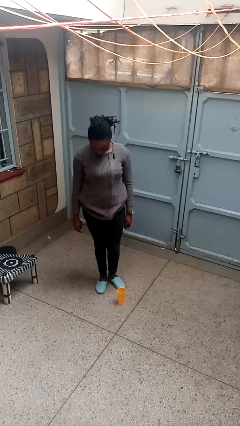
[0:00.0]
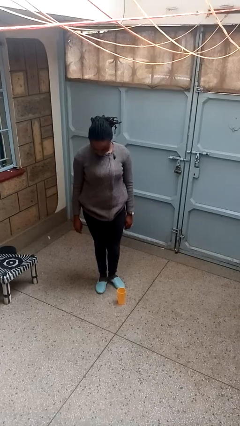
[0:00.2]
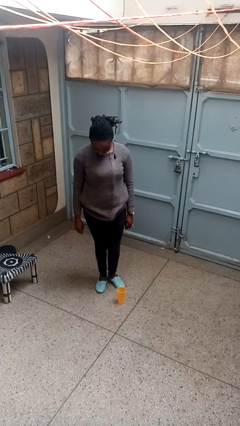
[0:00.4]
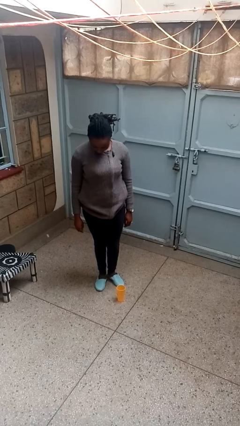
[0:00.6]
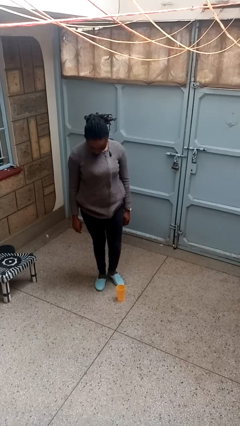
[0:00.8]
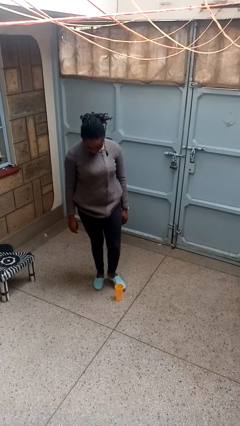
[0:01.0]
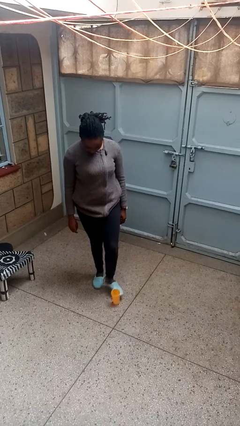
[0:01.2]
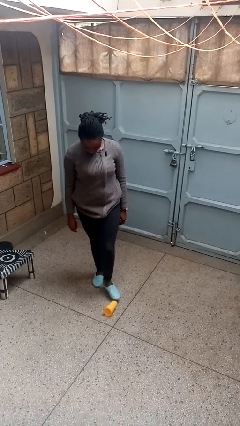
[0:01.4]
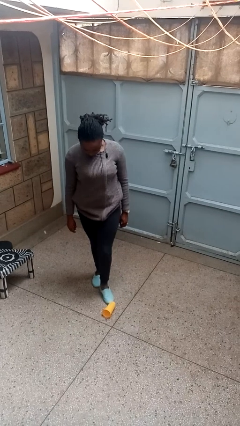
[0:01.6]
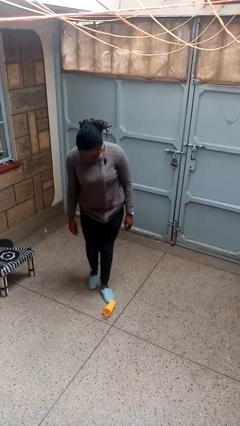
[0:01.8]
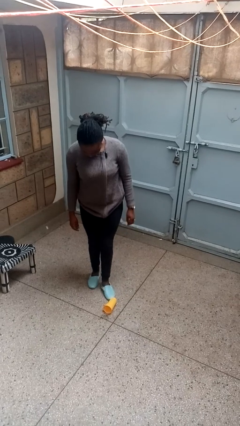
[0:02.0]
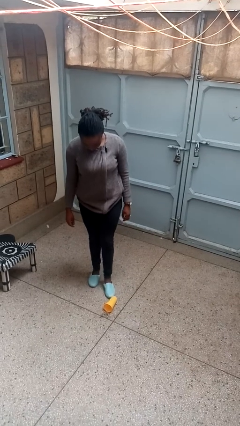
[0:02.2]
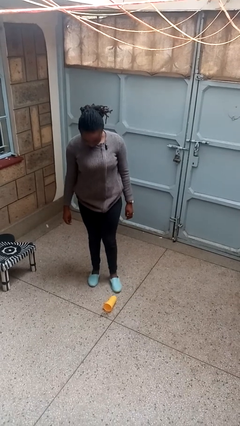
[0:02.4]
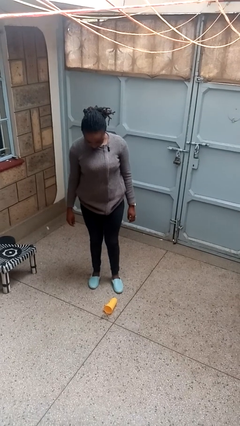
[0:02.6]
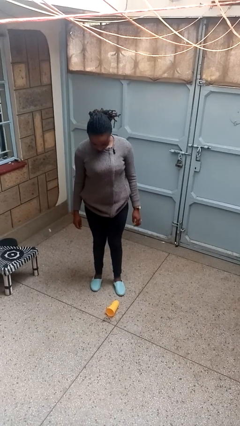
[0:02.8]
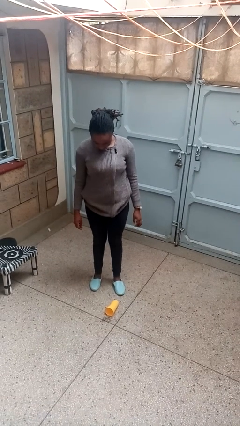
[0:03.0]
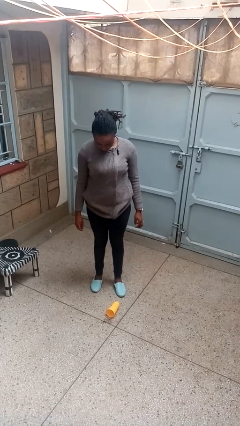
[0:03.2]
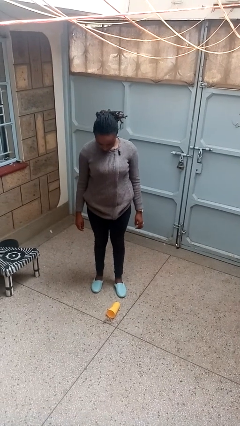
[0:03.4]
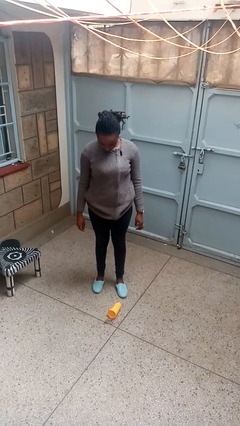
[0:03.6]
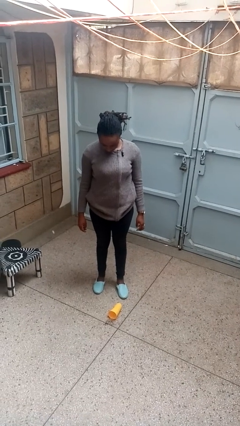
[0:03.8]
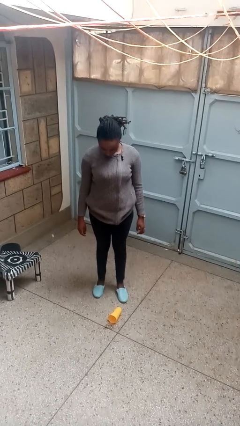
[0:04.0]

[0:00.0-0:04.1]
person spills on floor

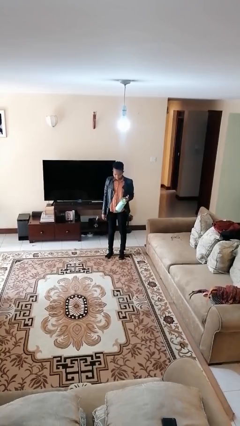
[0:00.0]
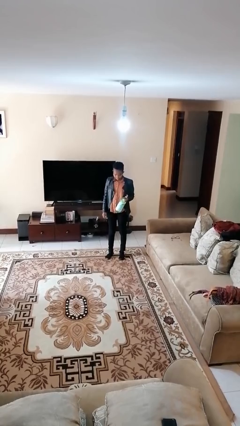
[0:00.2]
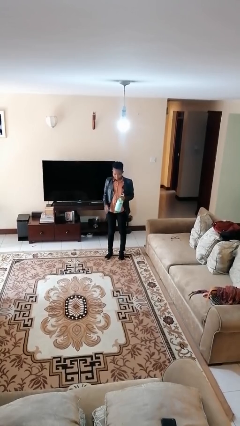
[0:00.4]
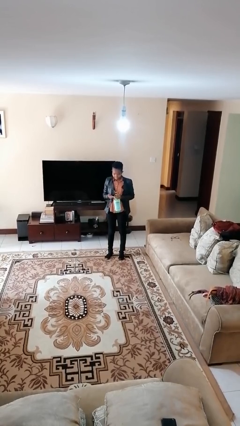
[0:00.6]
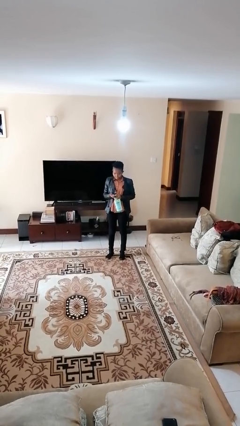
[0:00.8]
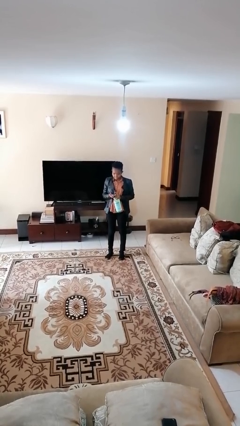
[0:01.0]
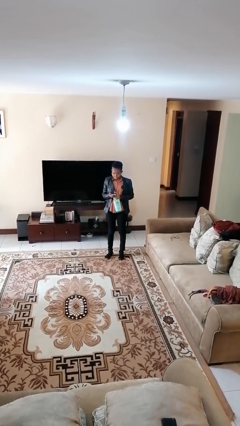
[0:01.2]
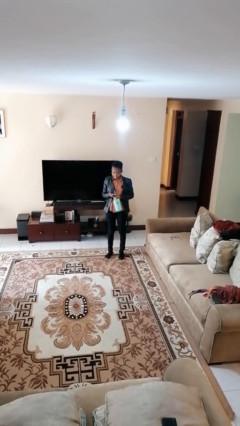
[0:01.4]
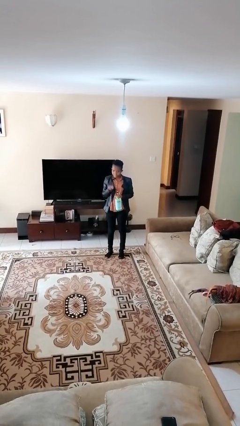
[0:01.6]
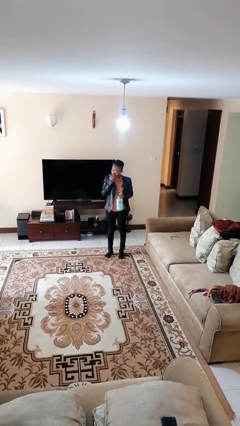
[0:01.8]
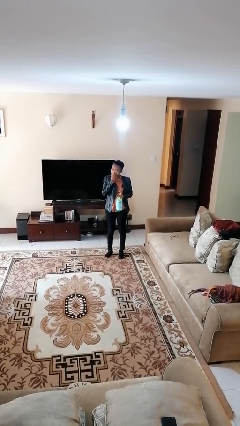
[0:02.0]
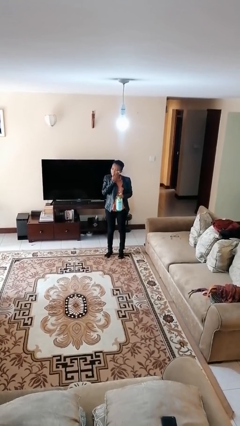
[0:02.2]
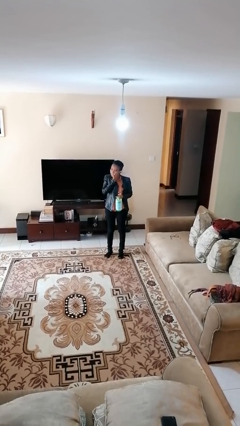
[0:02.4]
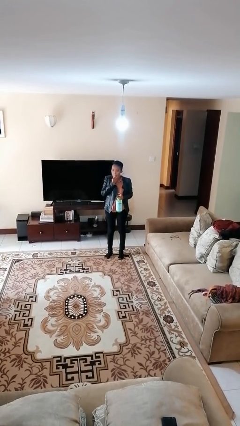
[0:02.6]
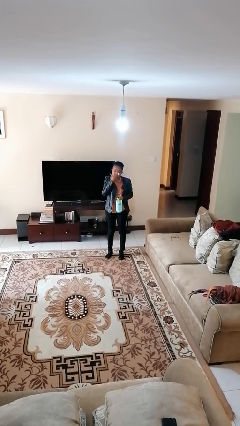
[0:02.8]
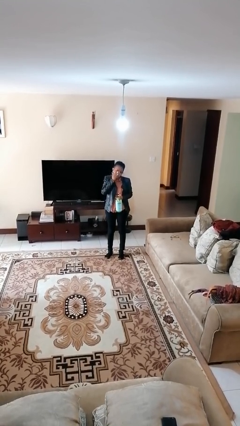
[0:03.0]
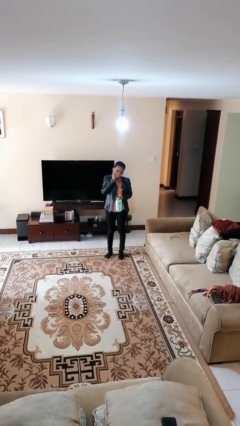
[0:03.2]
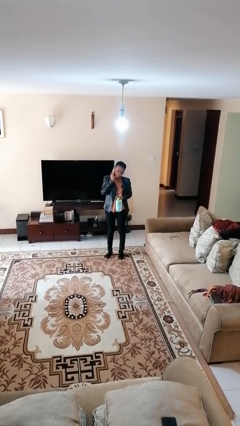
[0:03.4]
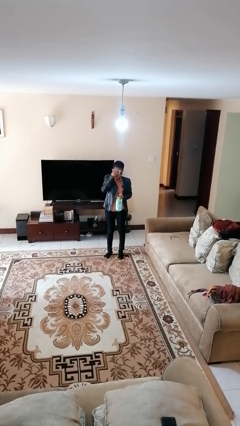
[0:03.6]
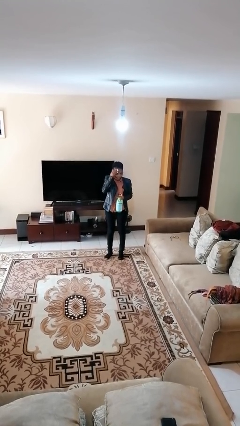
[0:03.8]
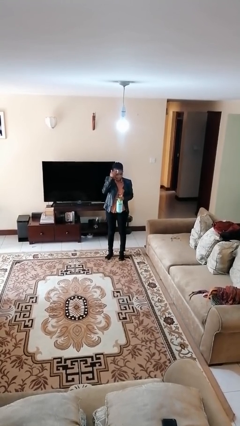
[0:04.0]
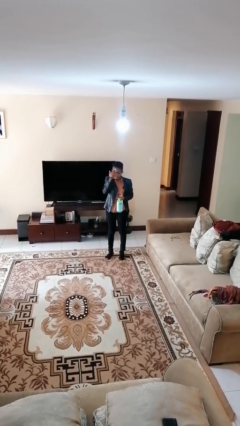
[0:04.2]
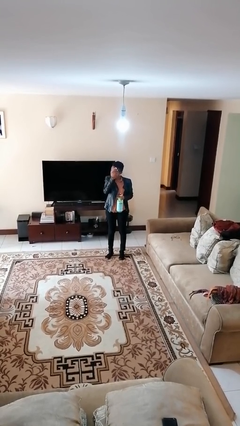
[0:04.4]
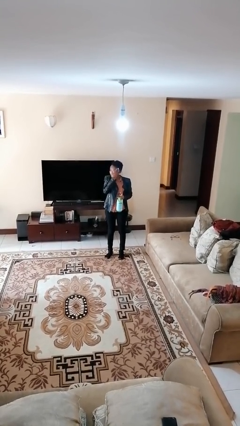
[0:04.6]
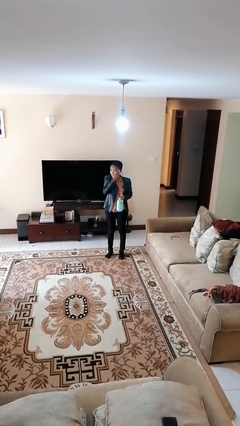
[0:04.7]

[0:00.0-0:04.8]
person applies facial moisturizer

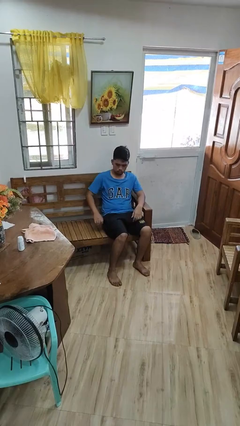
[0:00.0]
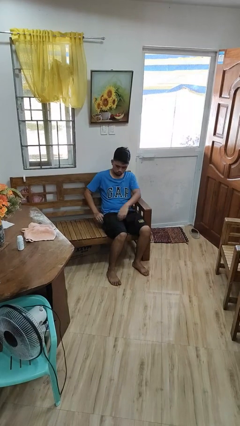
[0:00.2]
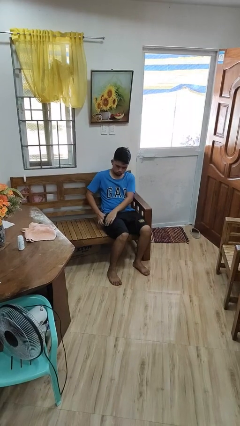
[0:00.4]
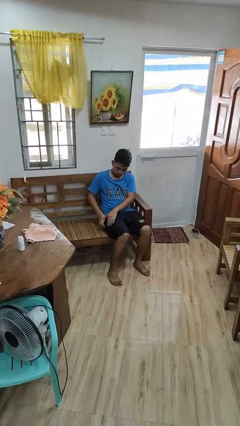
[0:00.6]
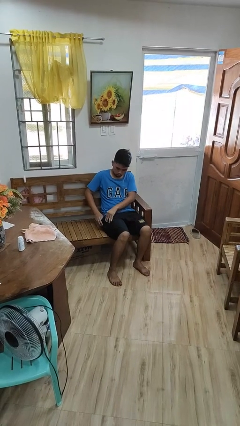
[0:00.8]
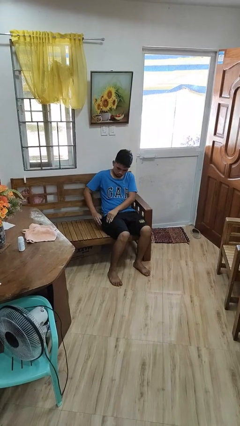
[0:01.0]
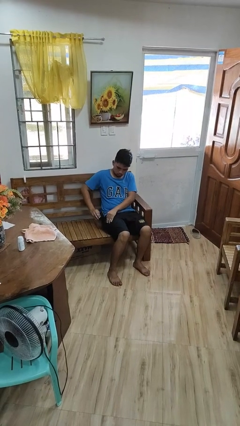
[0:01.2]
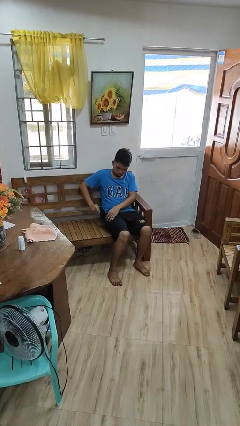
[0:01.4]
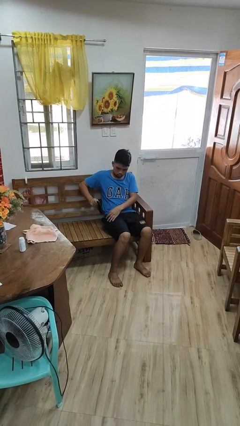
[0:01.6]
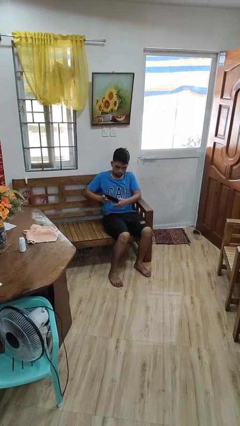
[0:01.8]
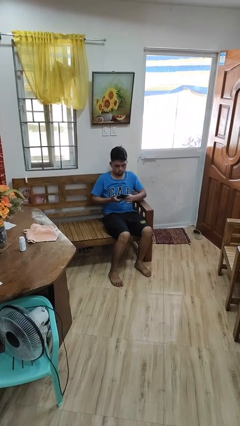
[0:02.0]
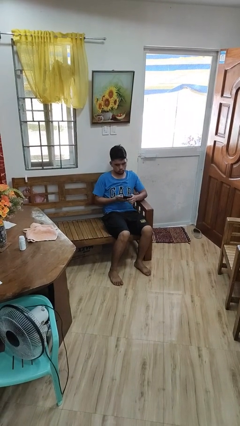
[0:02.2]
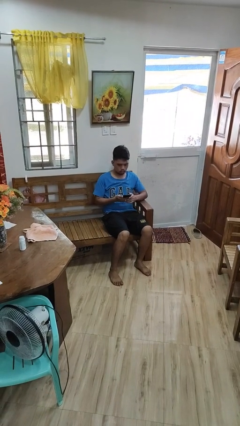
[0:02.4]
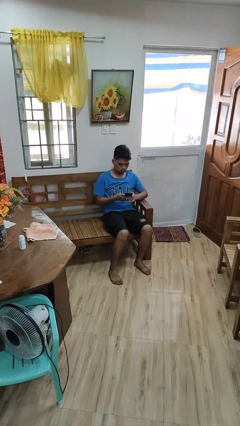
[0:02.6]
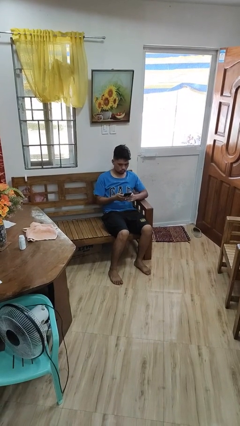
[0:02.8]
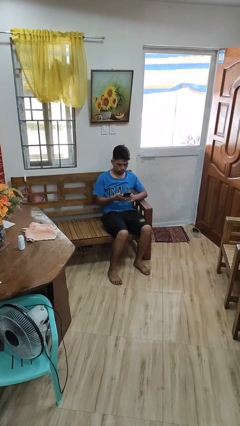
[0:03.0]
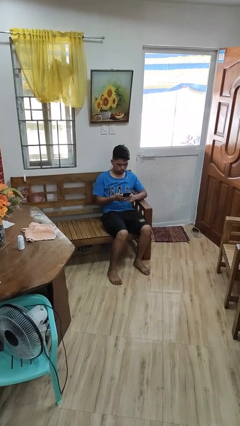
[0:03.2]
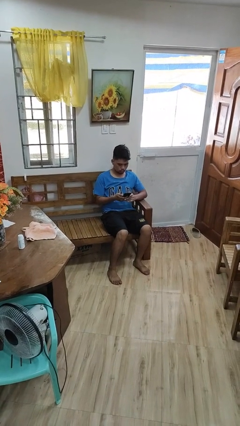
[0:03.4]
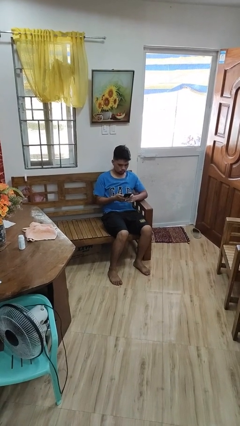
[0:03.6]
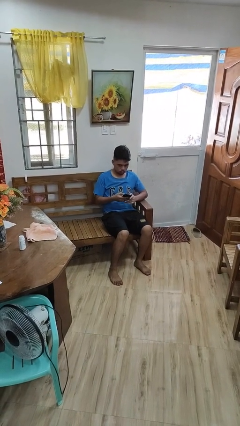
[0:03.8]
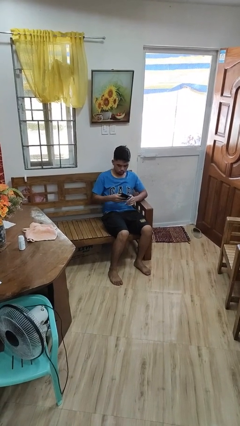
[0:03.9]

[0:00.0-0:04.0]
person takes phone from pocket

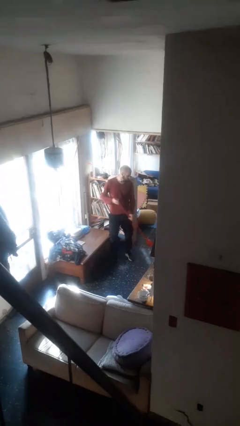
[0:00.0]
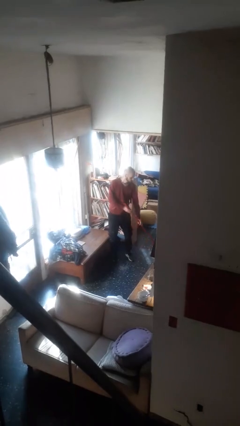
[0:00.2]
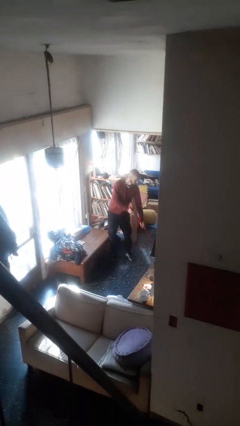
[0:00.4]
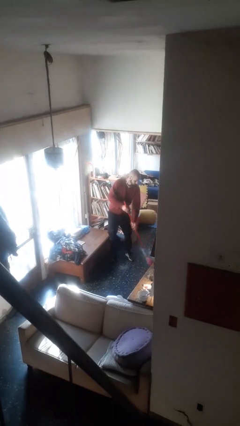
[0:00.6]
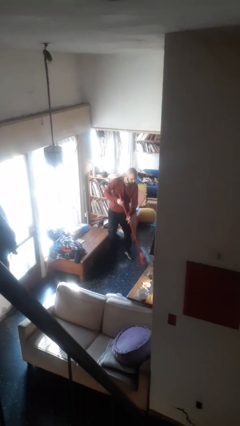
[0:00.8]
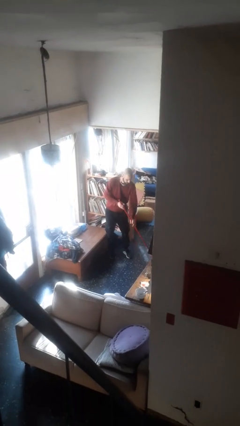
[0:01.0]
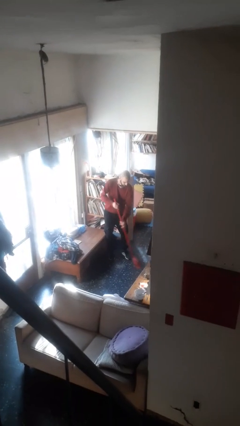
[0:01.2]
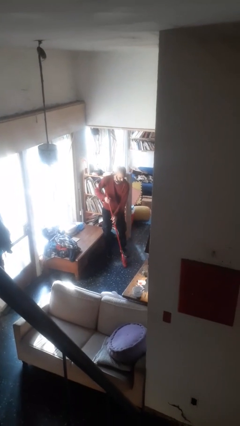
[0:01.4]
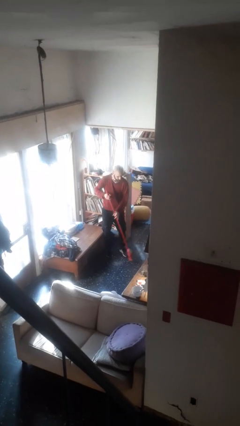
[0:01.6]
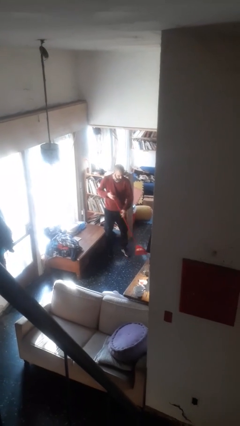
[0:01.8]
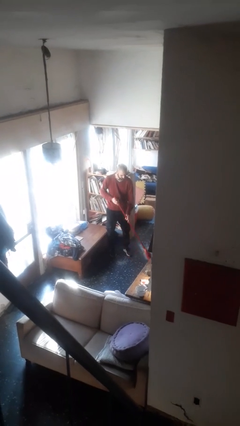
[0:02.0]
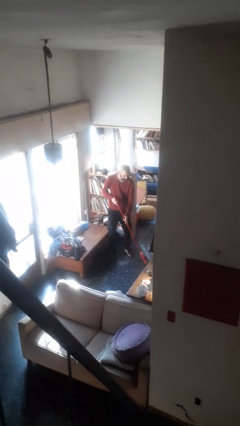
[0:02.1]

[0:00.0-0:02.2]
person sweeps floor

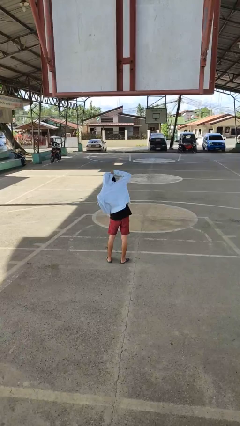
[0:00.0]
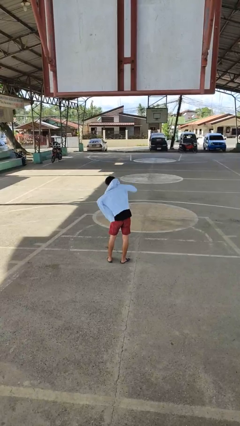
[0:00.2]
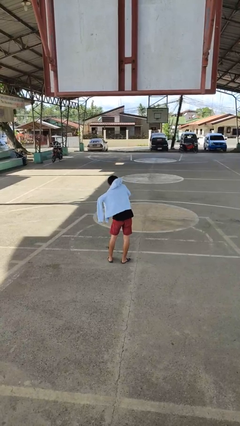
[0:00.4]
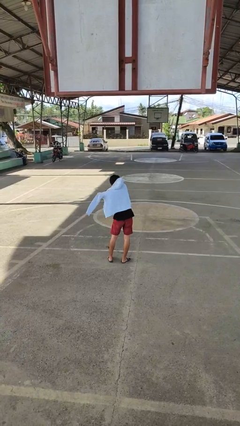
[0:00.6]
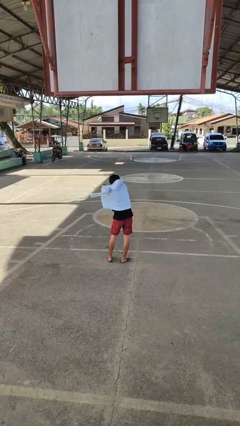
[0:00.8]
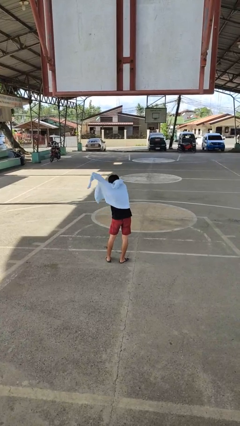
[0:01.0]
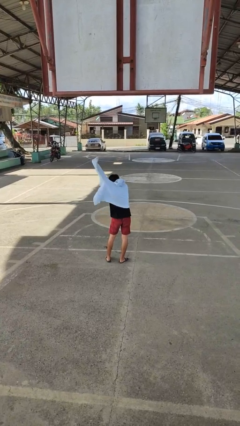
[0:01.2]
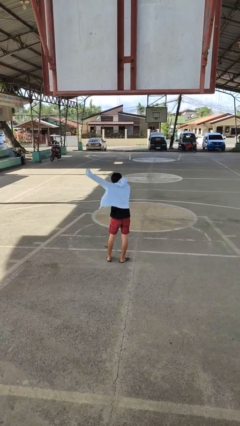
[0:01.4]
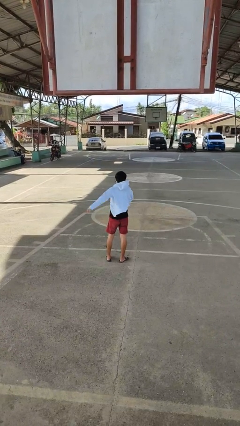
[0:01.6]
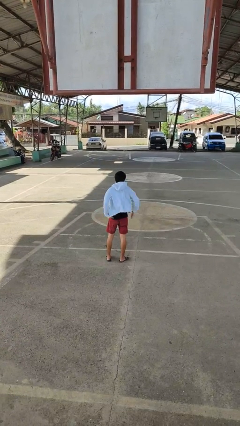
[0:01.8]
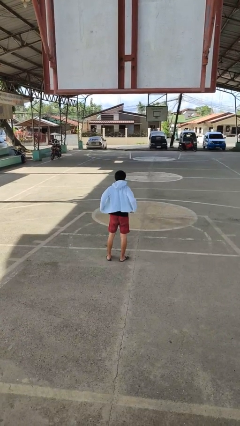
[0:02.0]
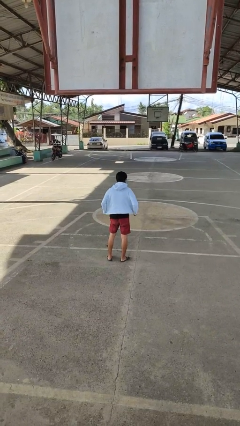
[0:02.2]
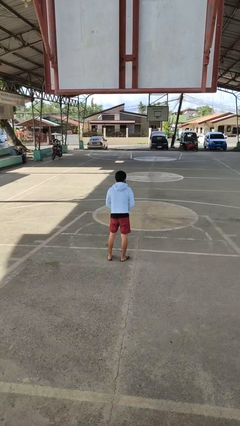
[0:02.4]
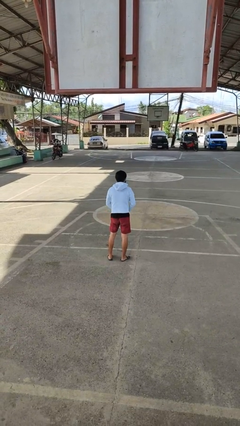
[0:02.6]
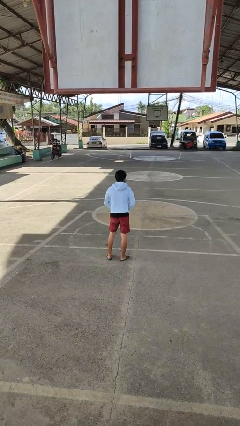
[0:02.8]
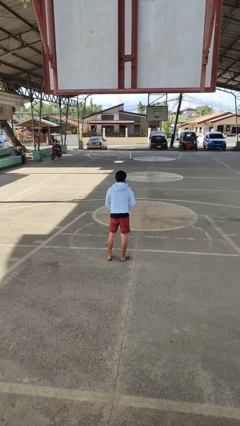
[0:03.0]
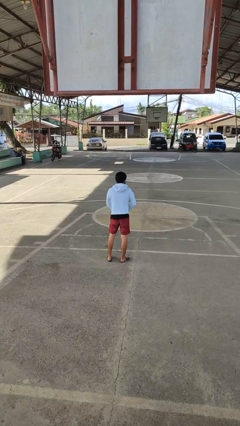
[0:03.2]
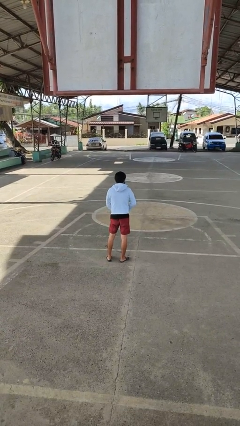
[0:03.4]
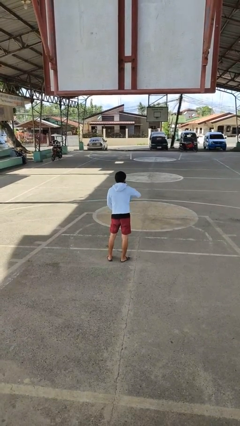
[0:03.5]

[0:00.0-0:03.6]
person puts on jacket
